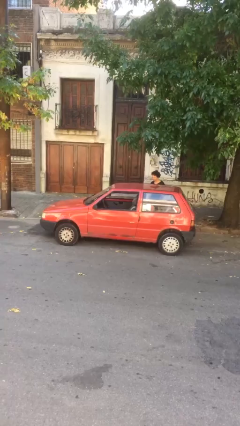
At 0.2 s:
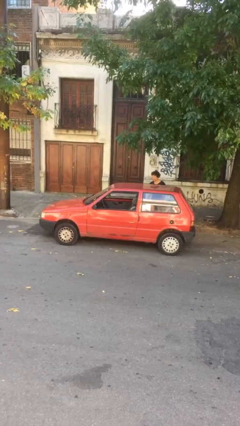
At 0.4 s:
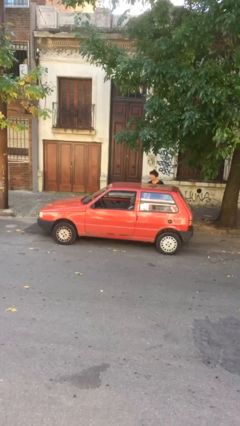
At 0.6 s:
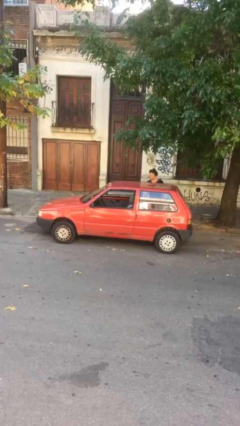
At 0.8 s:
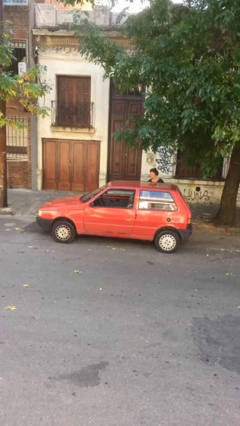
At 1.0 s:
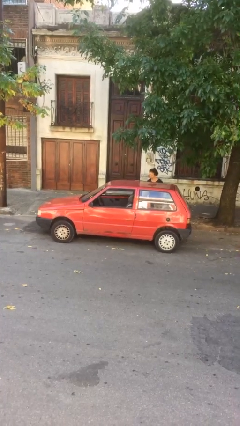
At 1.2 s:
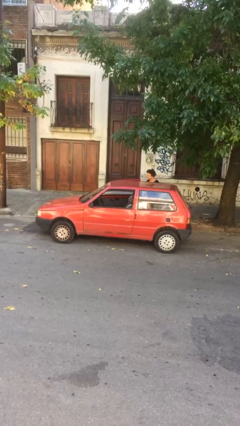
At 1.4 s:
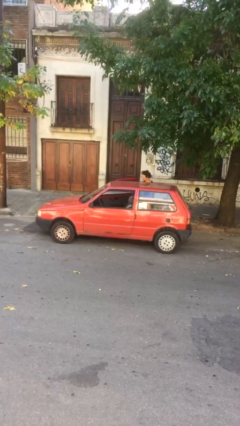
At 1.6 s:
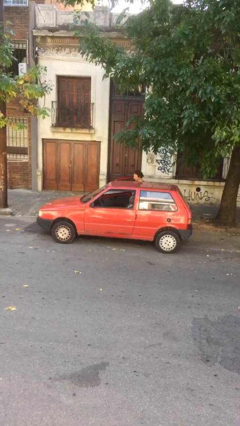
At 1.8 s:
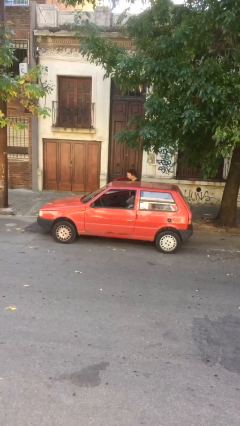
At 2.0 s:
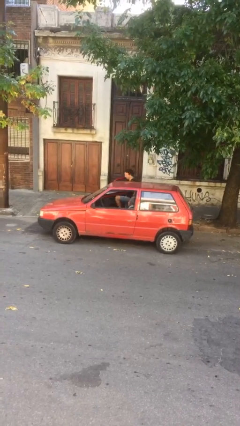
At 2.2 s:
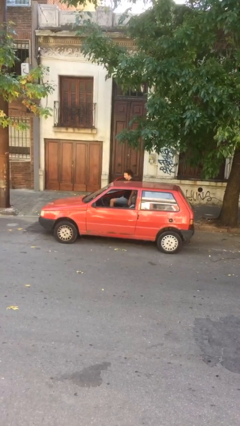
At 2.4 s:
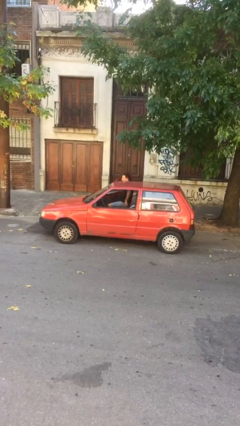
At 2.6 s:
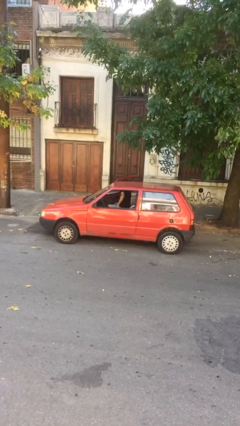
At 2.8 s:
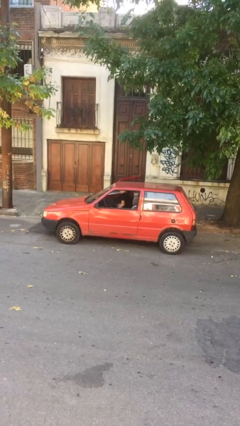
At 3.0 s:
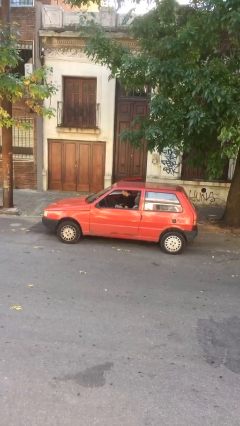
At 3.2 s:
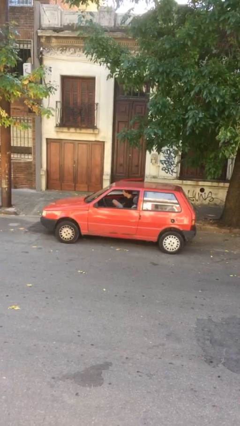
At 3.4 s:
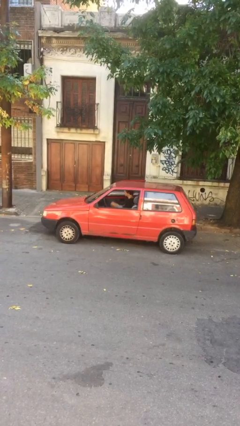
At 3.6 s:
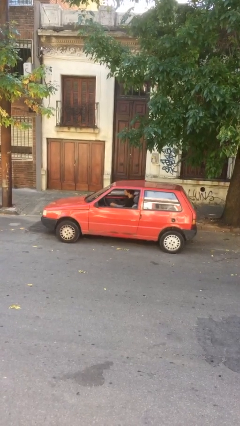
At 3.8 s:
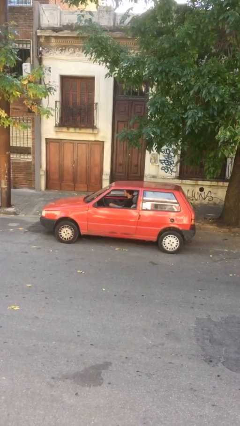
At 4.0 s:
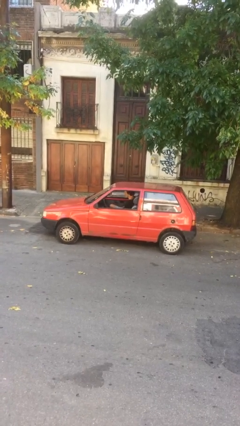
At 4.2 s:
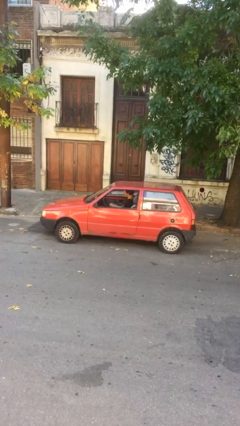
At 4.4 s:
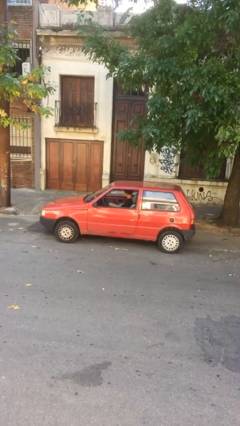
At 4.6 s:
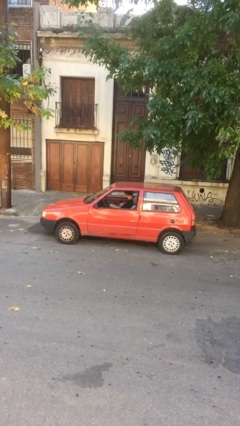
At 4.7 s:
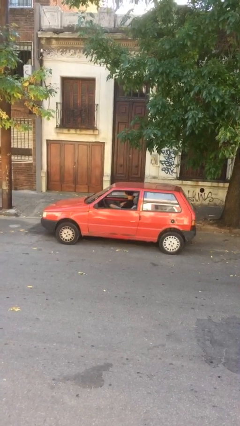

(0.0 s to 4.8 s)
car picks up person

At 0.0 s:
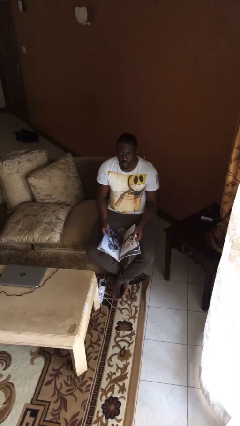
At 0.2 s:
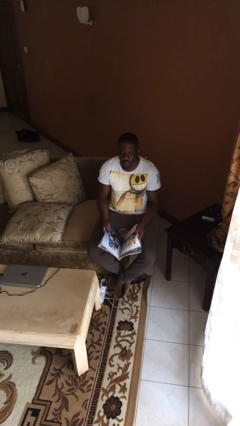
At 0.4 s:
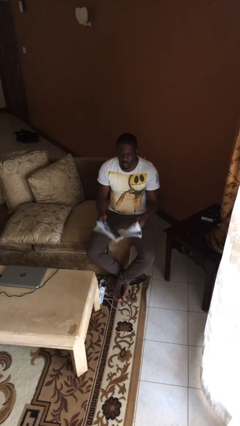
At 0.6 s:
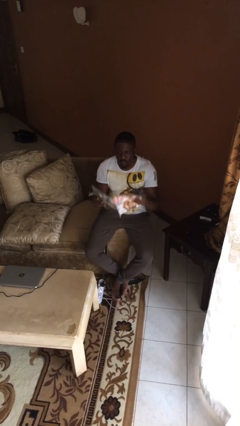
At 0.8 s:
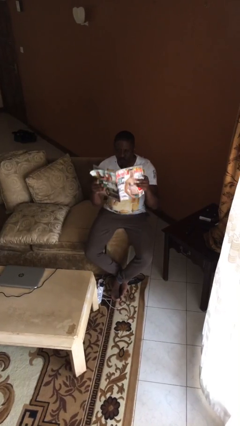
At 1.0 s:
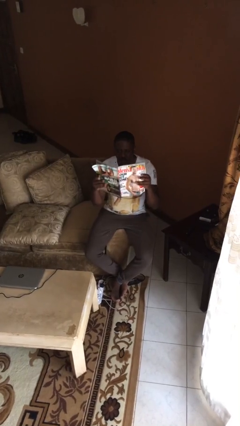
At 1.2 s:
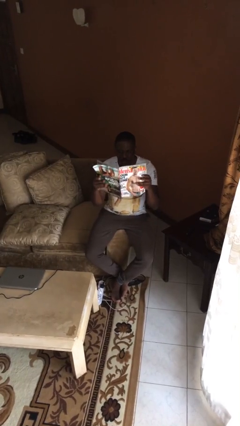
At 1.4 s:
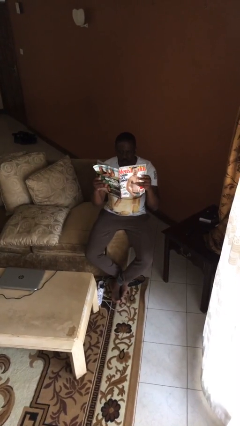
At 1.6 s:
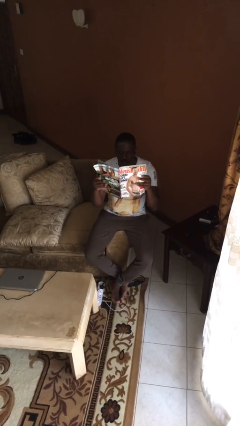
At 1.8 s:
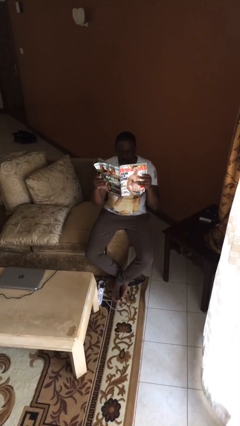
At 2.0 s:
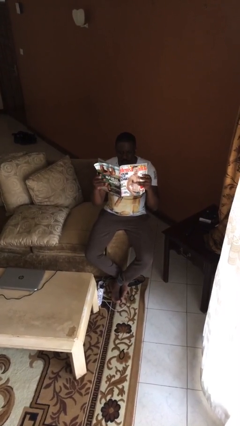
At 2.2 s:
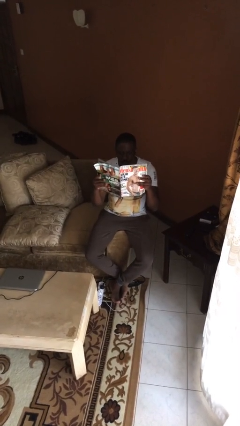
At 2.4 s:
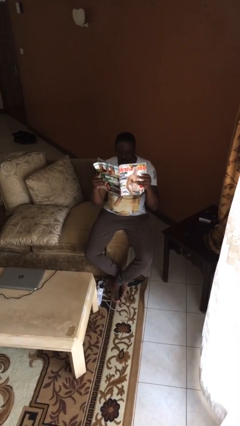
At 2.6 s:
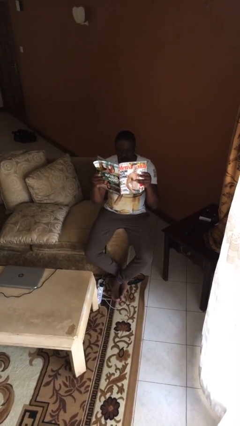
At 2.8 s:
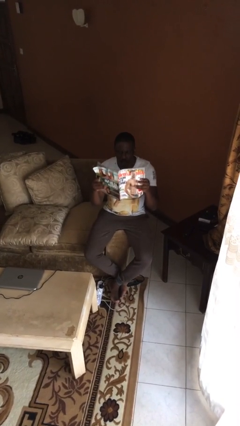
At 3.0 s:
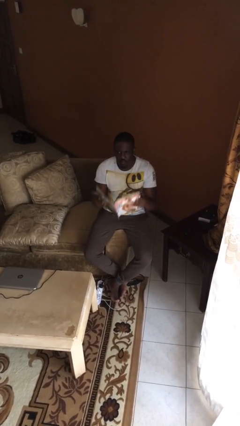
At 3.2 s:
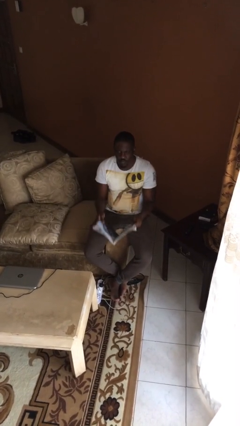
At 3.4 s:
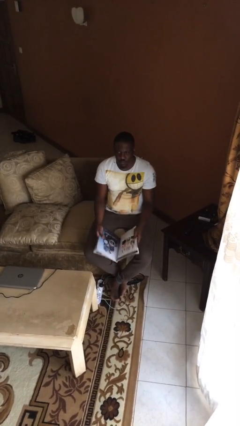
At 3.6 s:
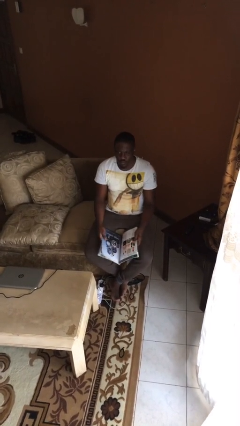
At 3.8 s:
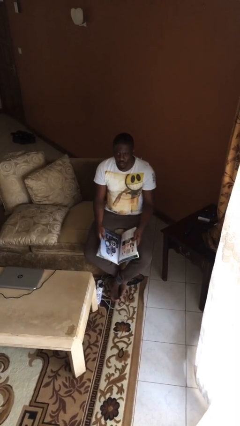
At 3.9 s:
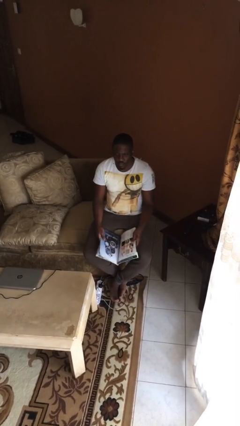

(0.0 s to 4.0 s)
person reads document

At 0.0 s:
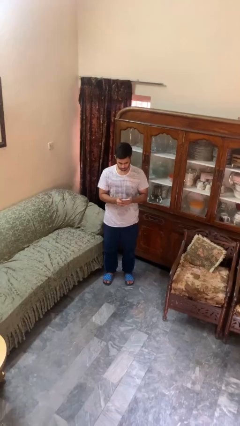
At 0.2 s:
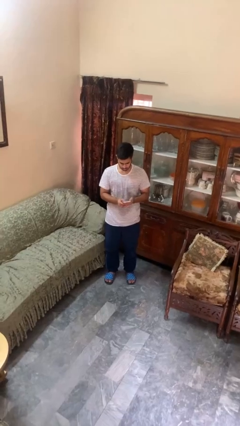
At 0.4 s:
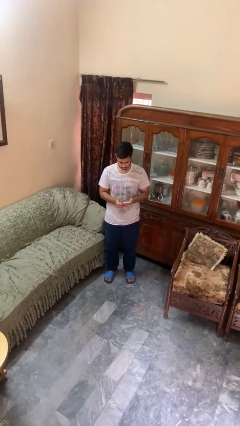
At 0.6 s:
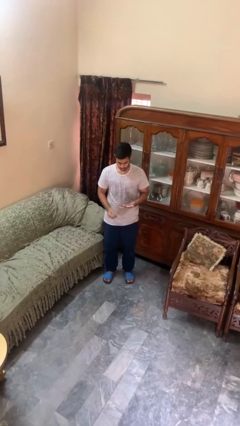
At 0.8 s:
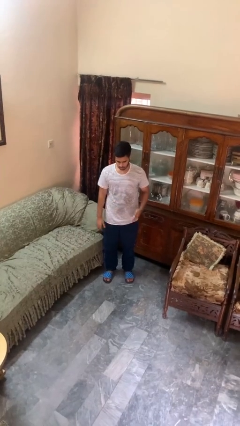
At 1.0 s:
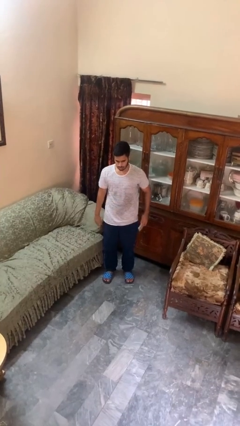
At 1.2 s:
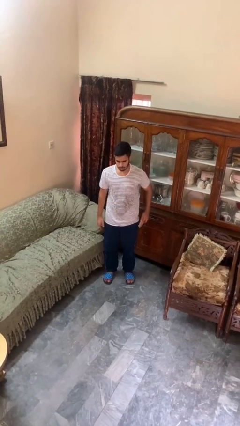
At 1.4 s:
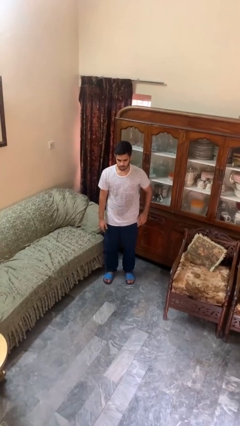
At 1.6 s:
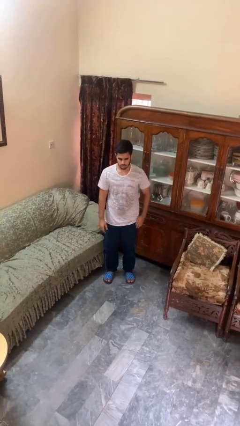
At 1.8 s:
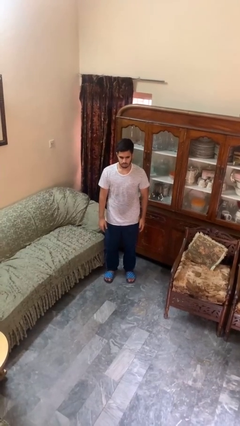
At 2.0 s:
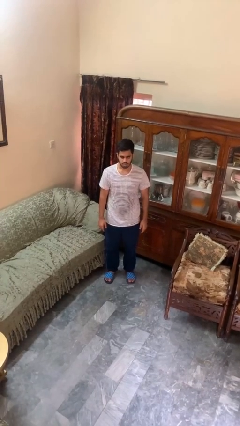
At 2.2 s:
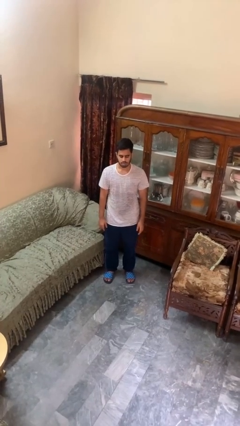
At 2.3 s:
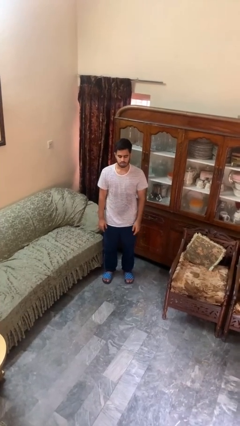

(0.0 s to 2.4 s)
person puts phone into pocket

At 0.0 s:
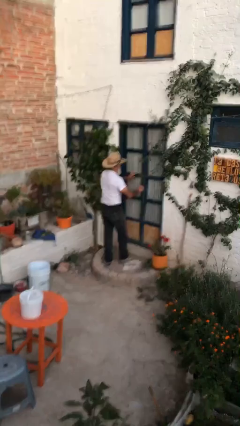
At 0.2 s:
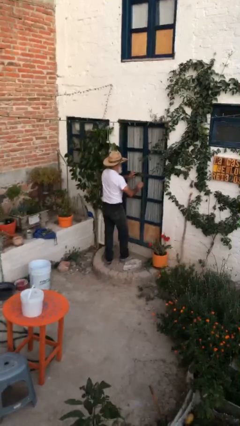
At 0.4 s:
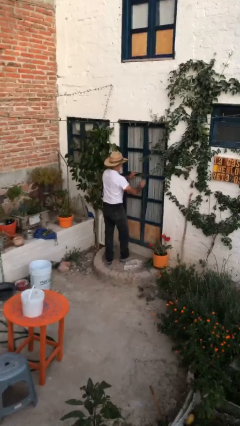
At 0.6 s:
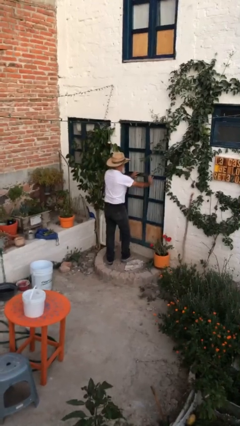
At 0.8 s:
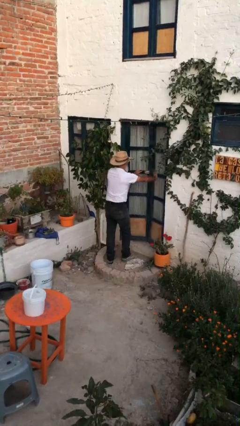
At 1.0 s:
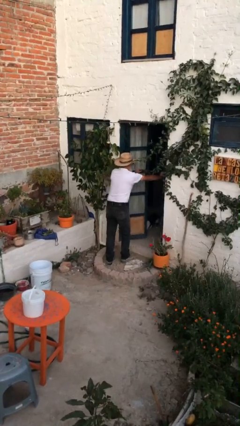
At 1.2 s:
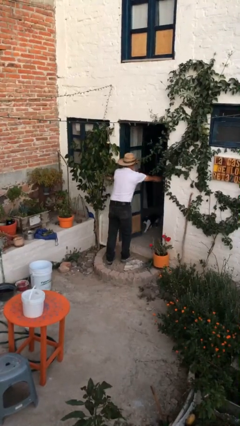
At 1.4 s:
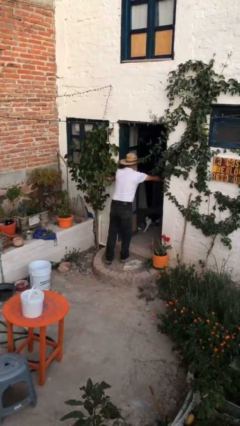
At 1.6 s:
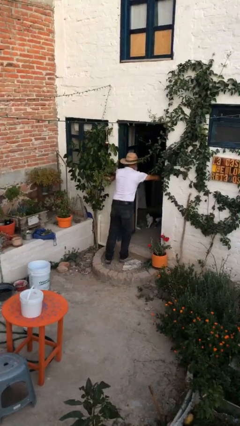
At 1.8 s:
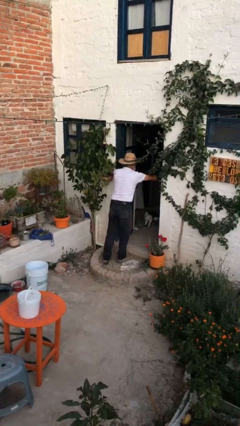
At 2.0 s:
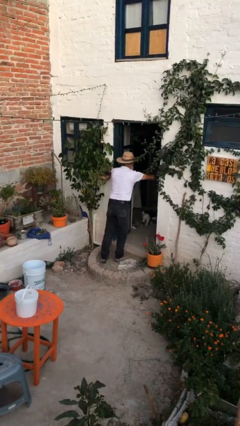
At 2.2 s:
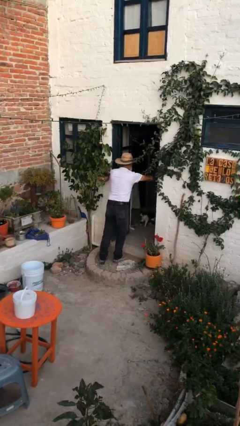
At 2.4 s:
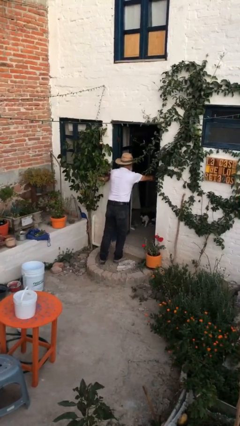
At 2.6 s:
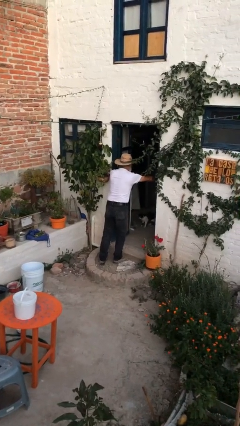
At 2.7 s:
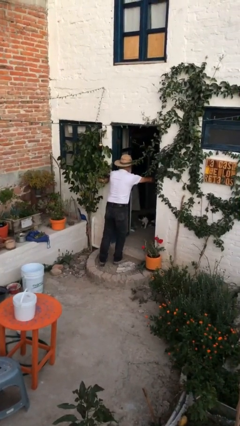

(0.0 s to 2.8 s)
person opens facility door

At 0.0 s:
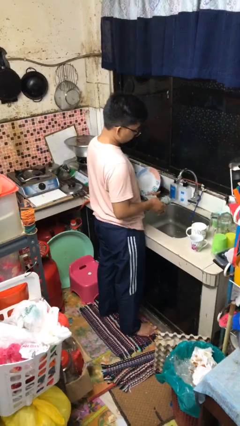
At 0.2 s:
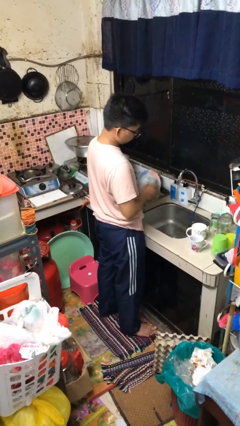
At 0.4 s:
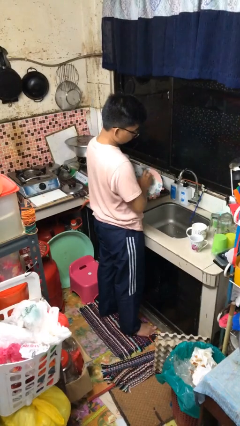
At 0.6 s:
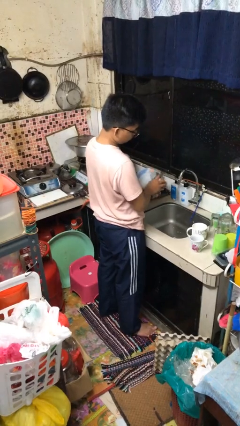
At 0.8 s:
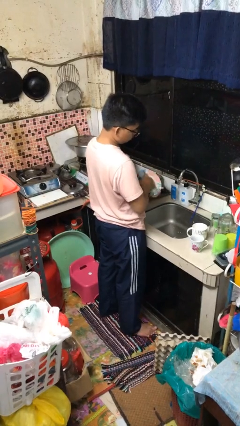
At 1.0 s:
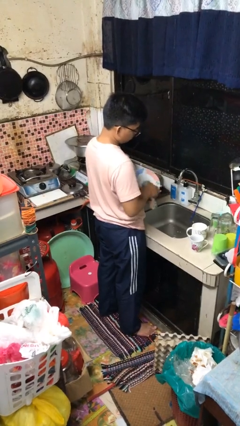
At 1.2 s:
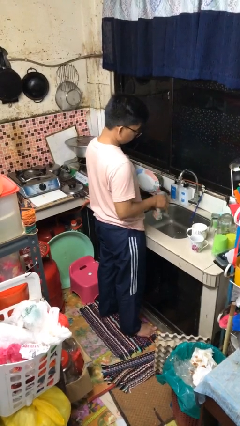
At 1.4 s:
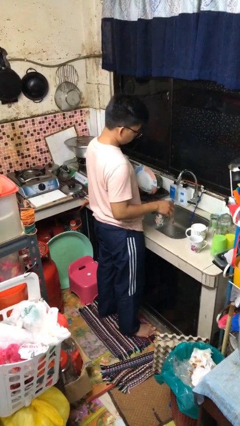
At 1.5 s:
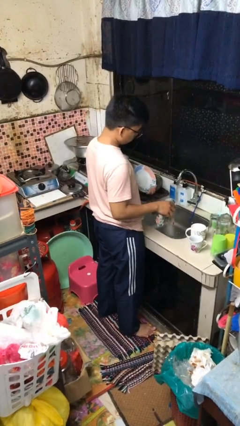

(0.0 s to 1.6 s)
person dries dish

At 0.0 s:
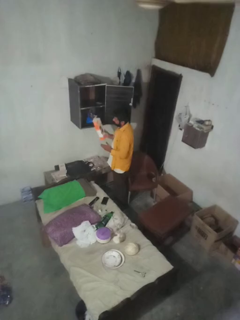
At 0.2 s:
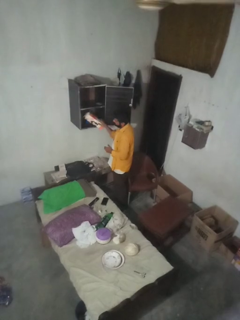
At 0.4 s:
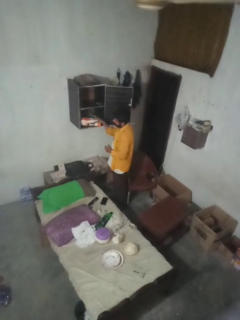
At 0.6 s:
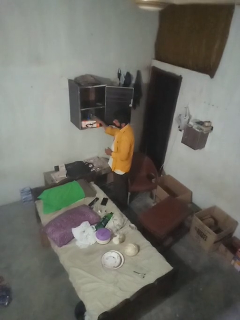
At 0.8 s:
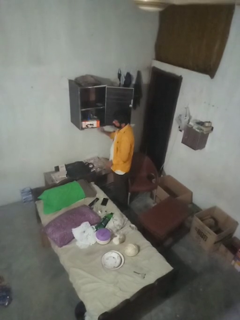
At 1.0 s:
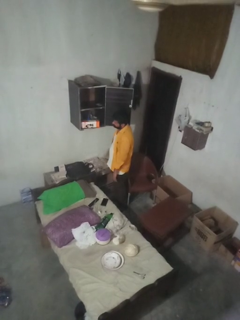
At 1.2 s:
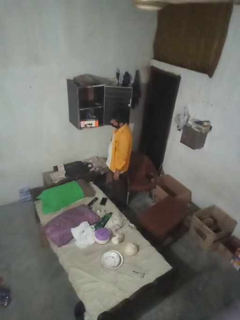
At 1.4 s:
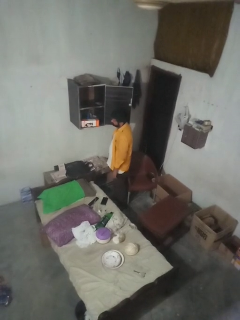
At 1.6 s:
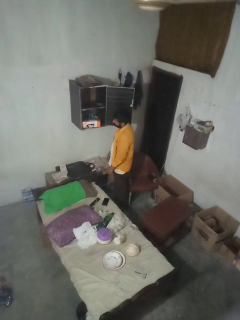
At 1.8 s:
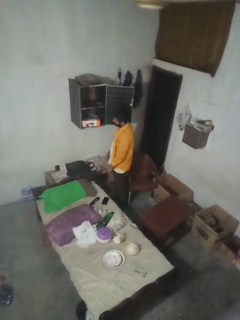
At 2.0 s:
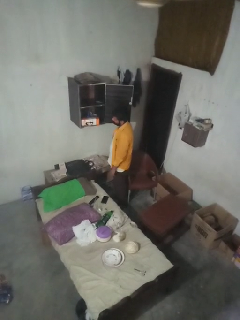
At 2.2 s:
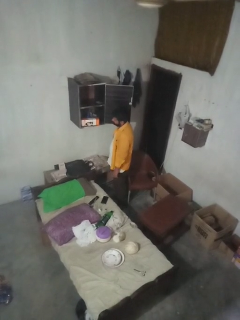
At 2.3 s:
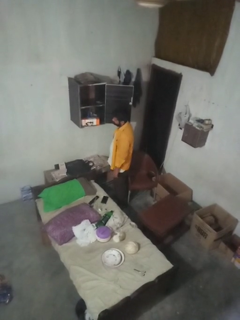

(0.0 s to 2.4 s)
person puts down object into cabinet
